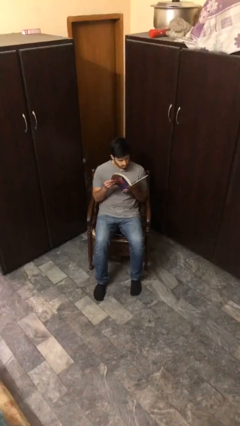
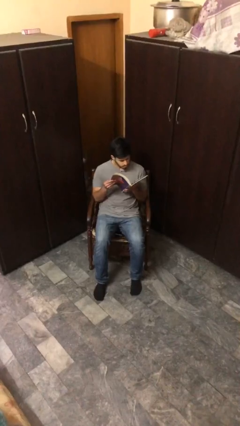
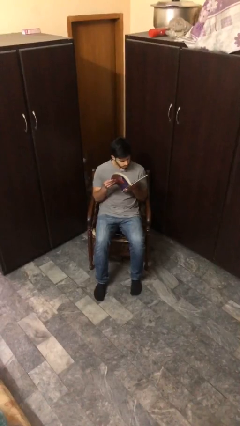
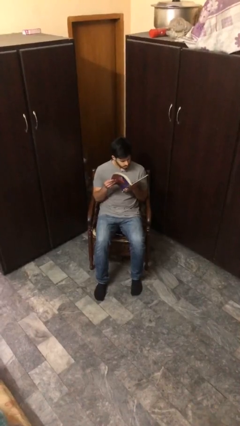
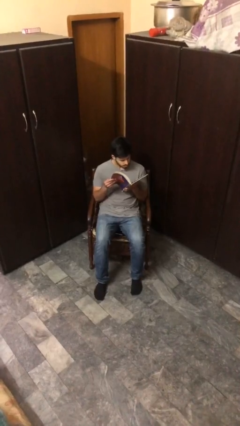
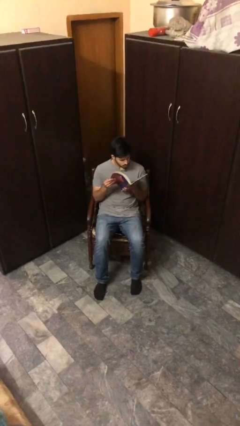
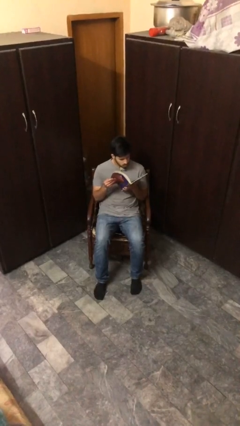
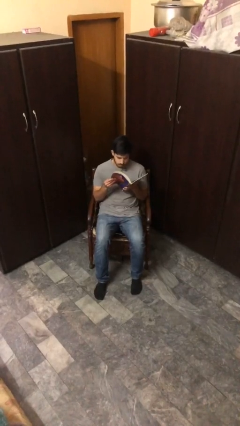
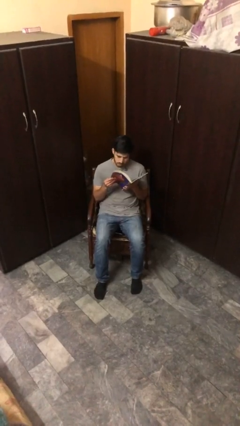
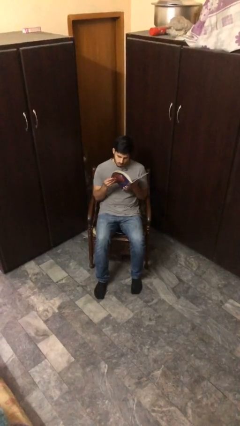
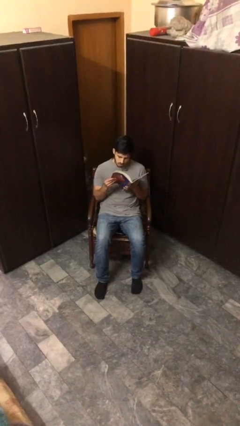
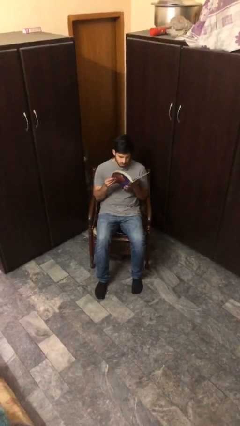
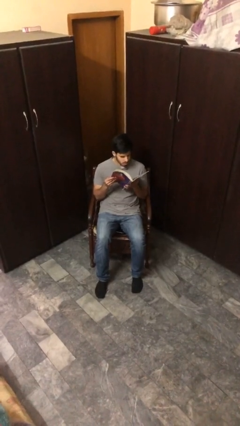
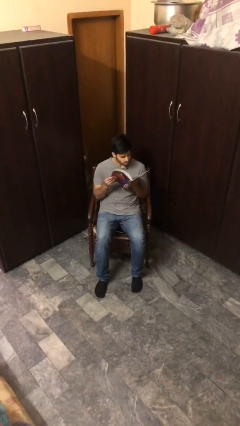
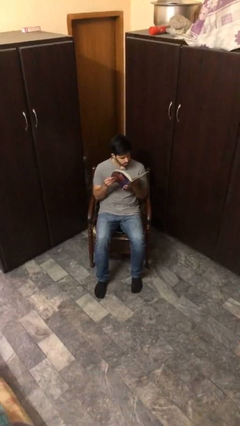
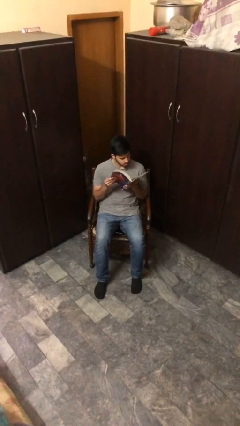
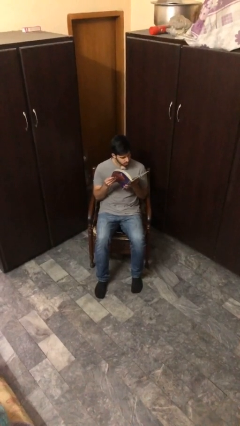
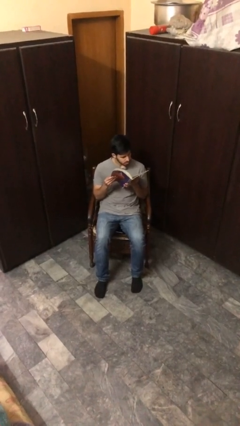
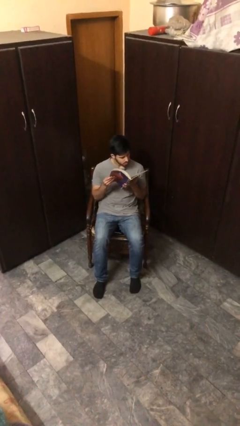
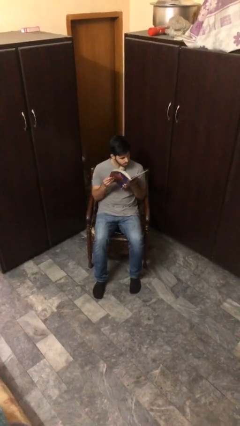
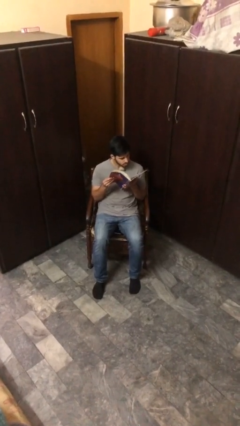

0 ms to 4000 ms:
person reads document

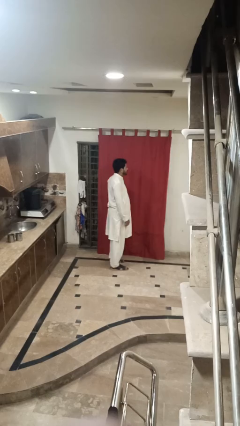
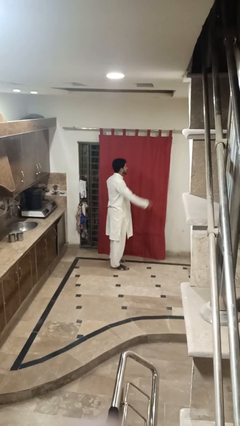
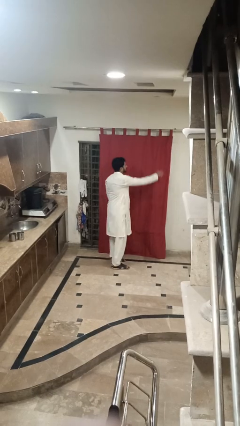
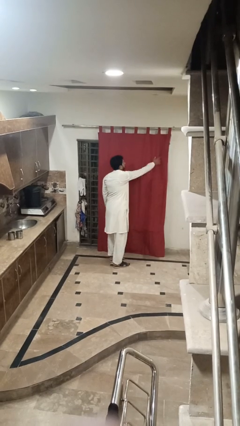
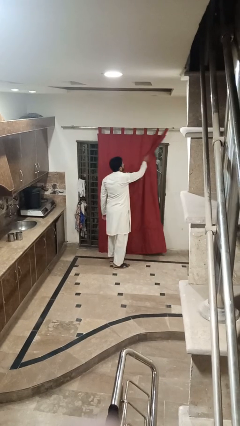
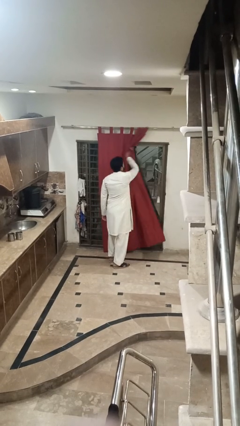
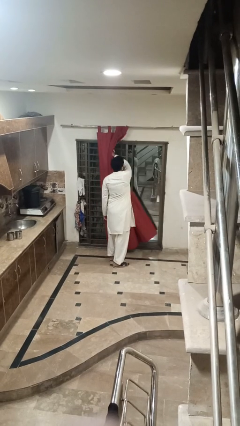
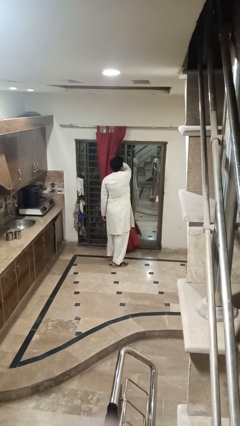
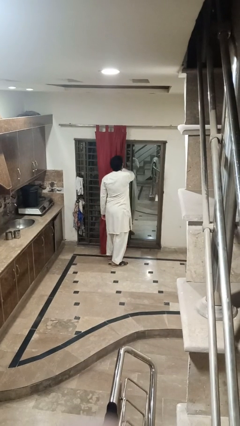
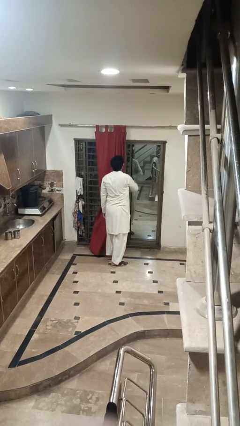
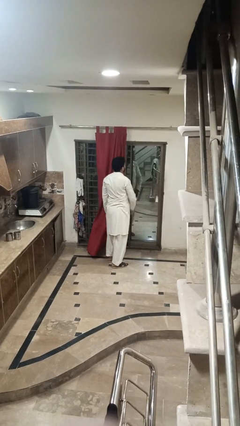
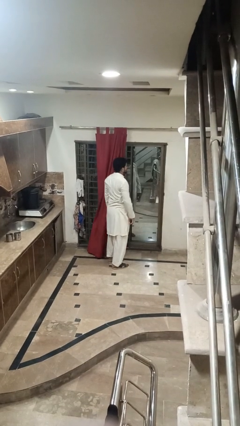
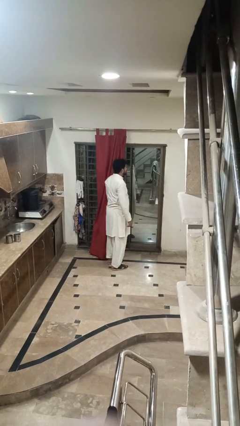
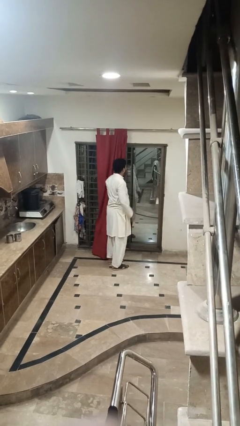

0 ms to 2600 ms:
person opens curtains

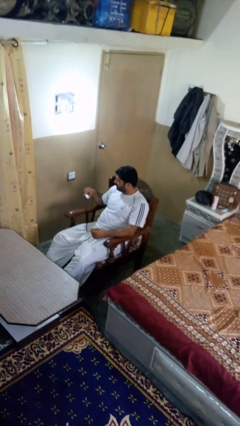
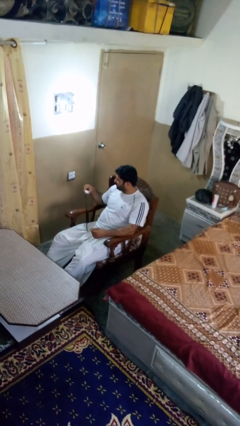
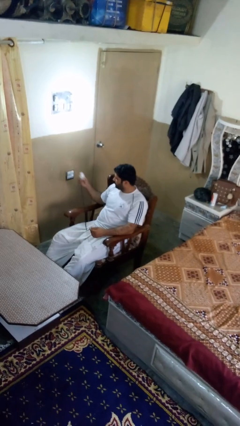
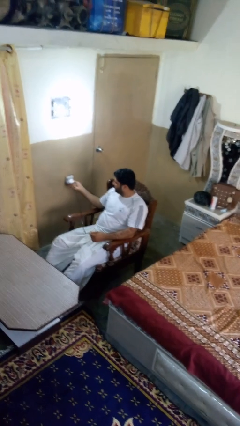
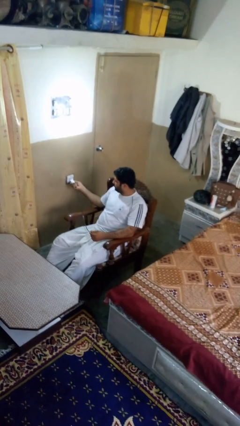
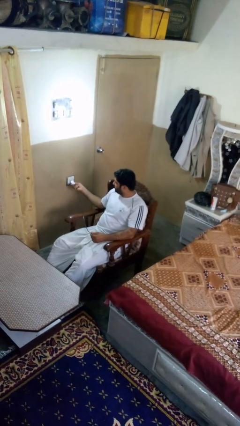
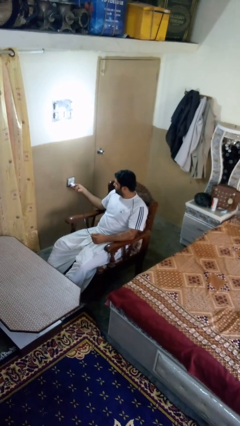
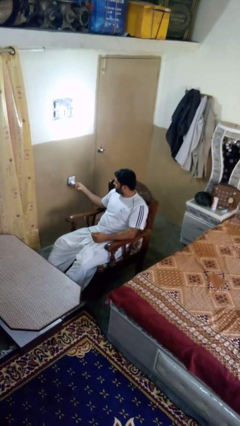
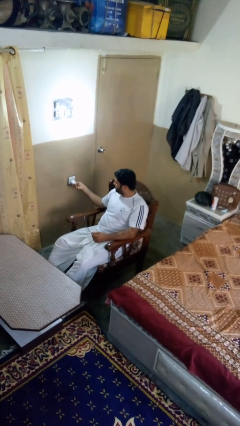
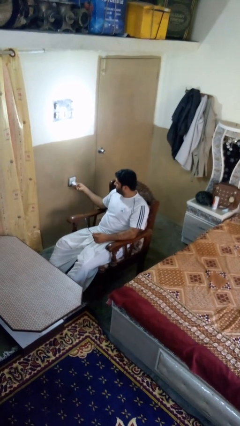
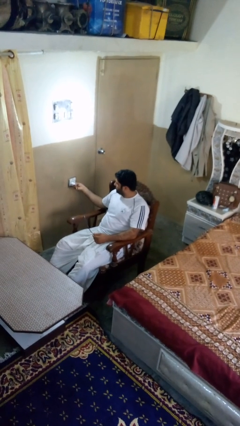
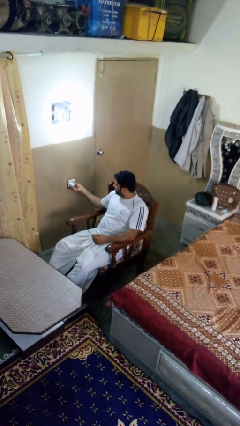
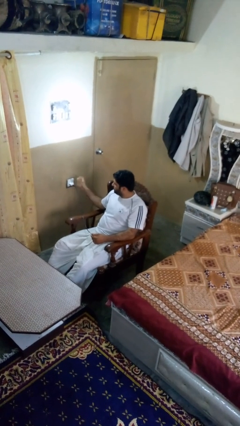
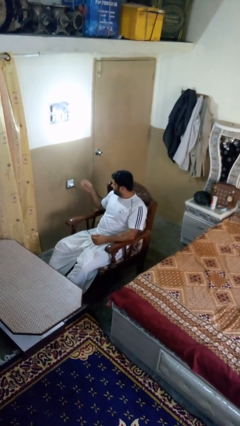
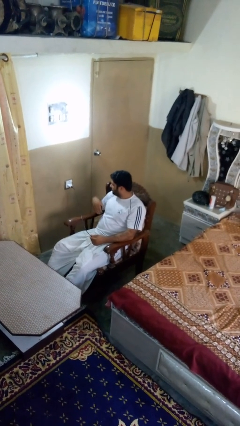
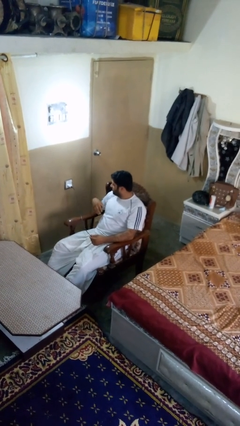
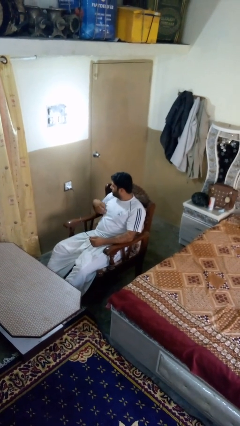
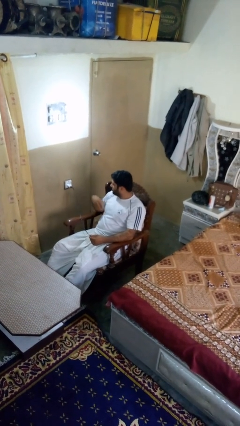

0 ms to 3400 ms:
person plugs into electrical socket

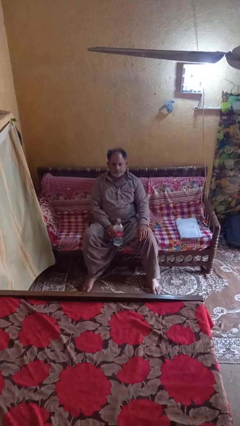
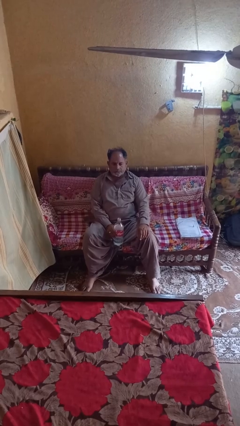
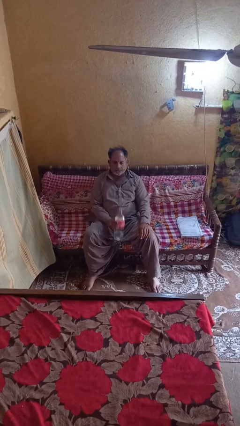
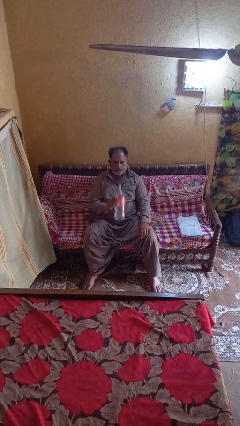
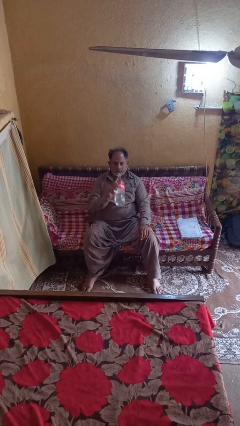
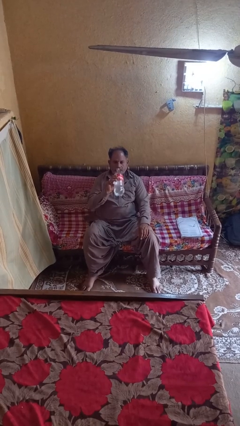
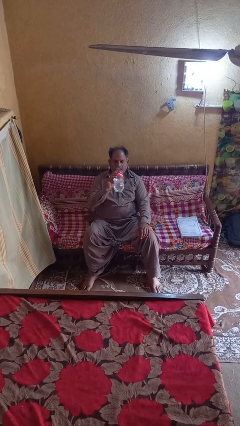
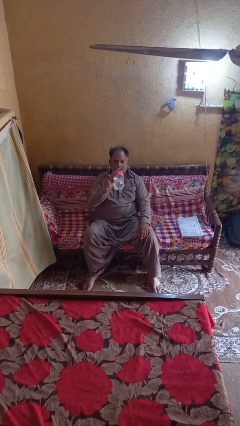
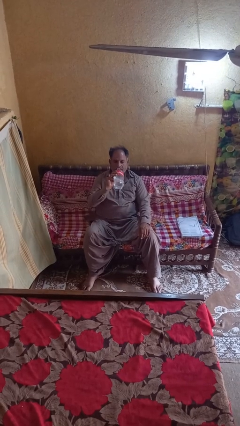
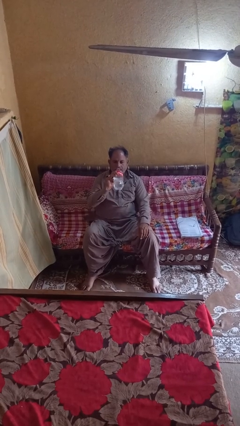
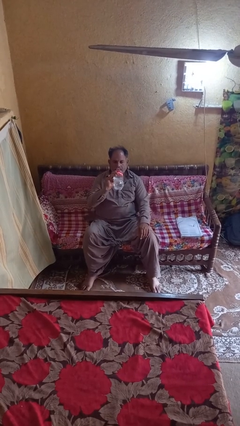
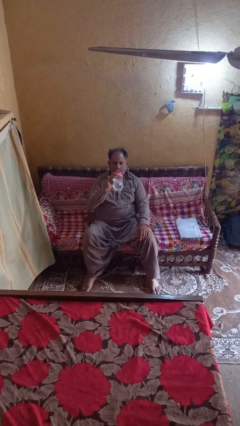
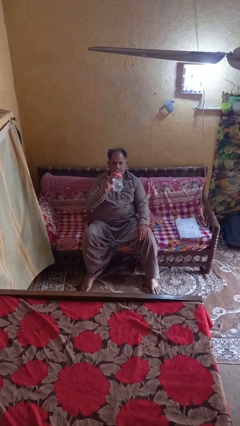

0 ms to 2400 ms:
person drinks from bottle

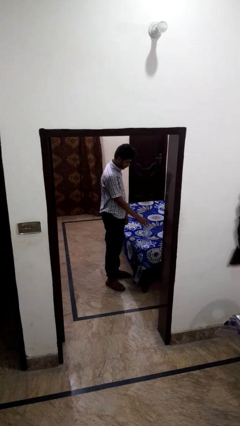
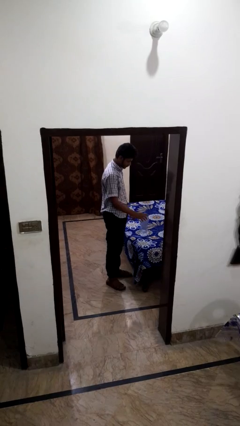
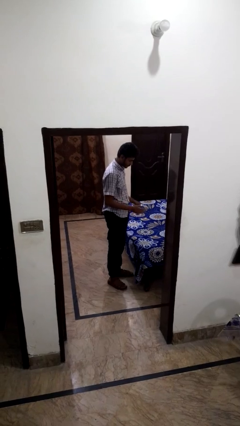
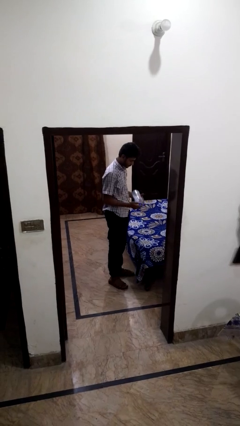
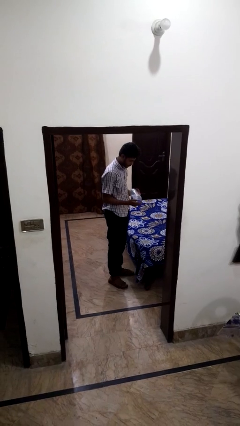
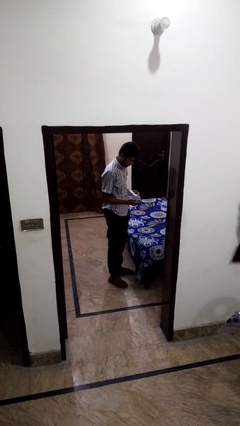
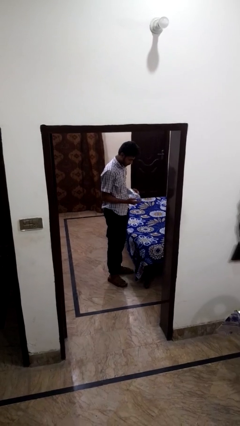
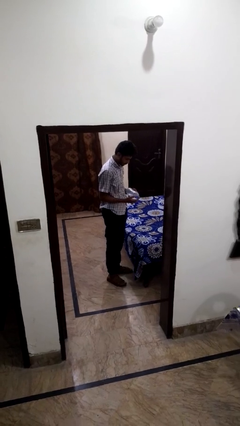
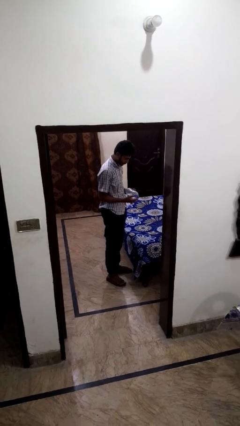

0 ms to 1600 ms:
person picks up object from bed

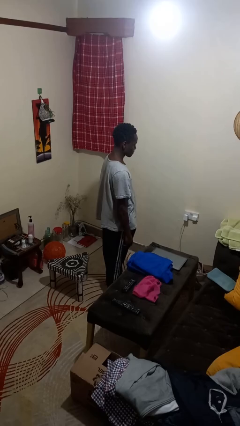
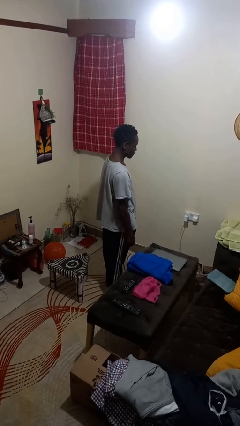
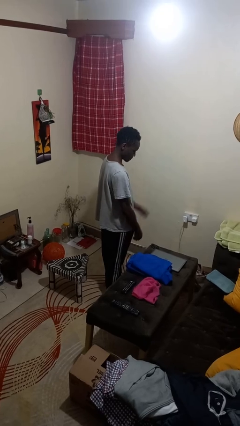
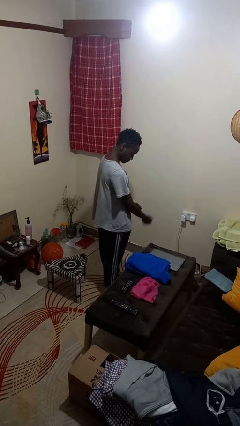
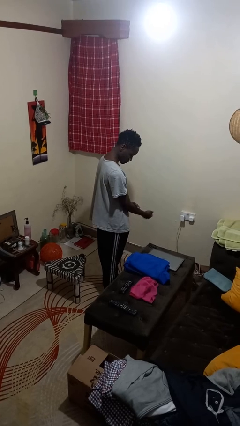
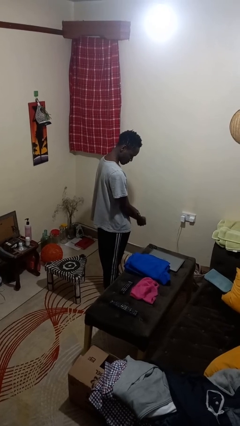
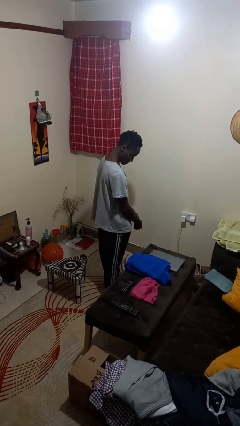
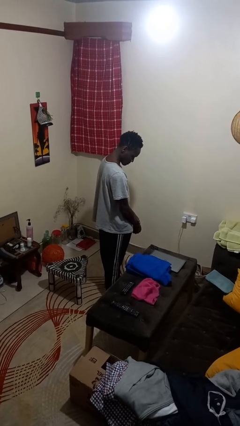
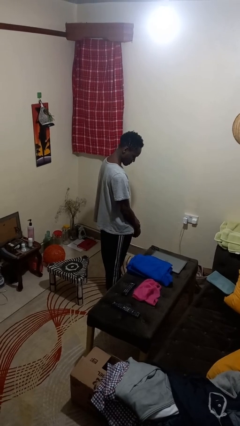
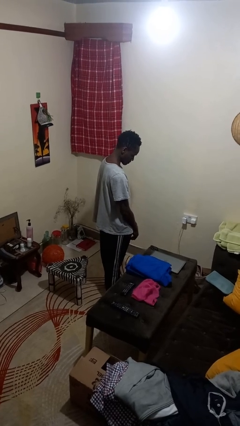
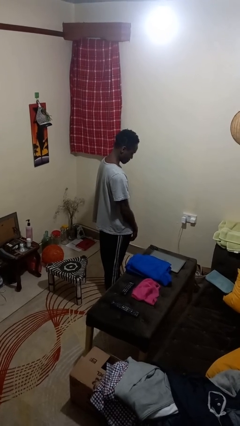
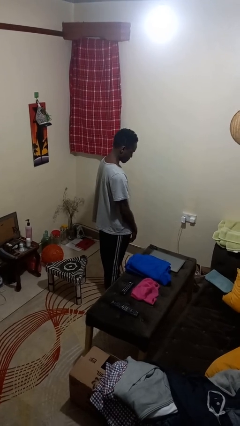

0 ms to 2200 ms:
person swats bug

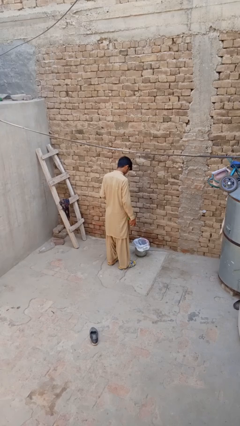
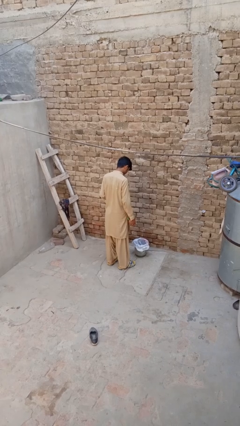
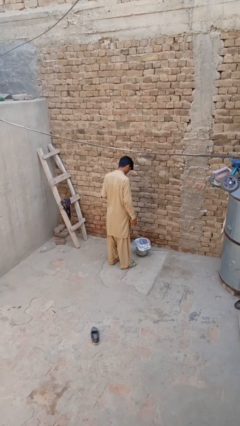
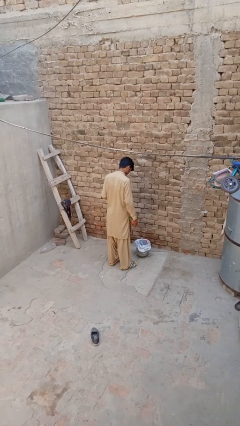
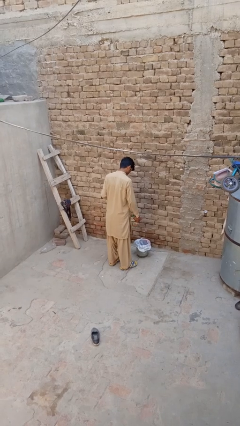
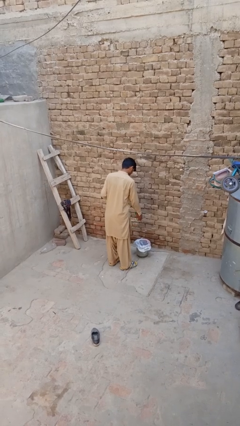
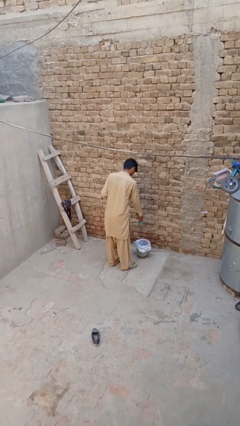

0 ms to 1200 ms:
person discards trash
